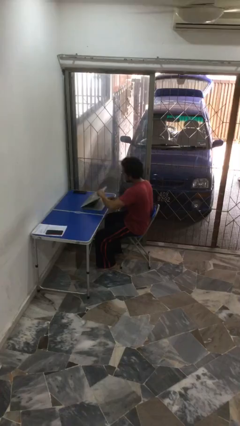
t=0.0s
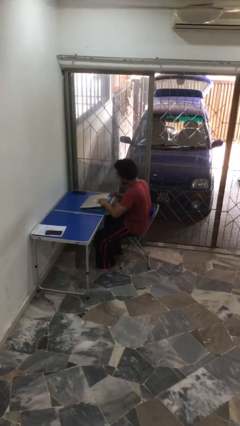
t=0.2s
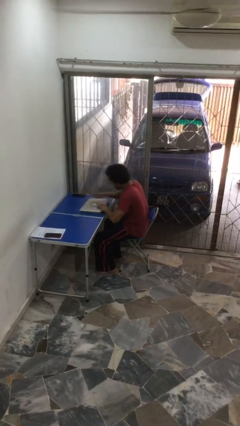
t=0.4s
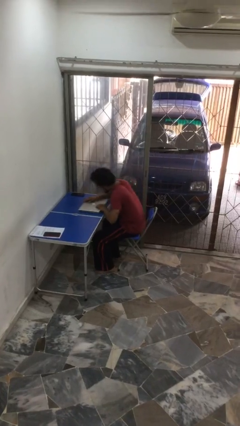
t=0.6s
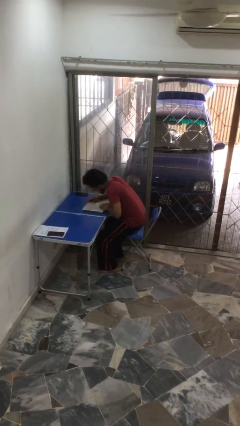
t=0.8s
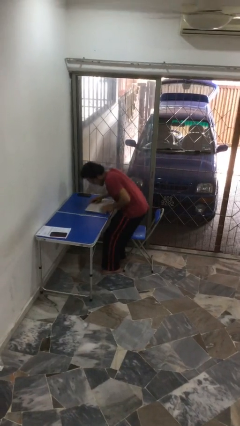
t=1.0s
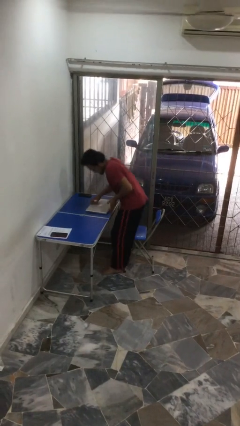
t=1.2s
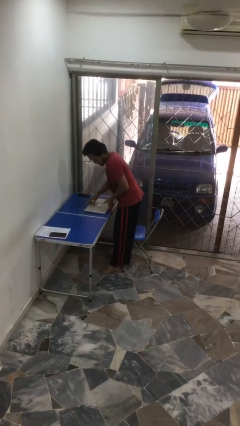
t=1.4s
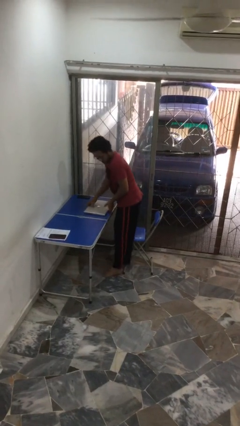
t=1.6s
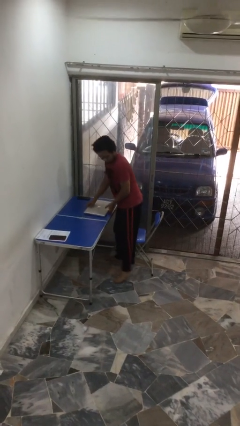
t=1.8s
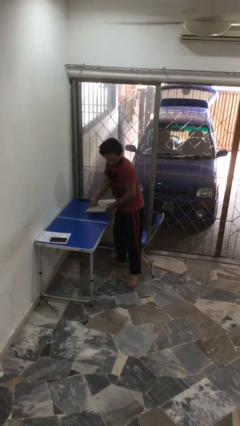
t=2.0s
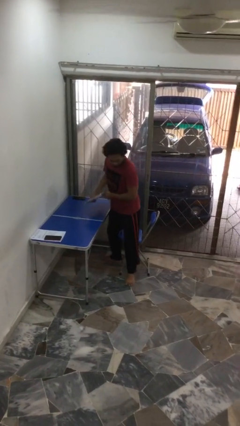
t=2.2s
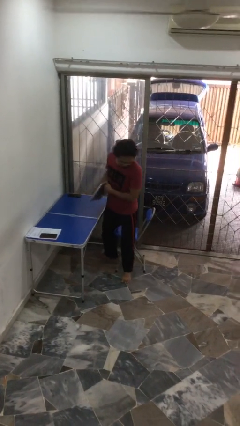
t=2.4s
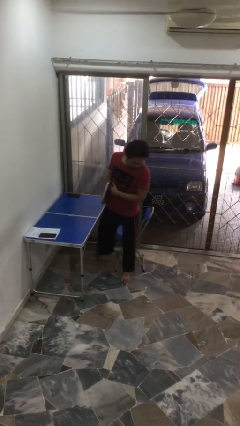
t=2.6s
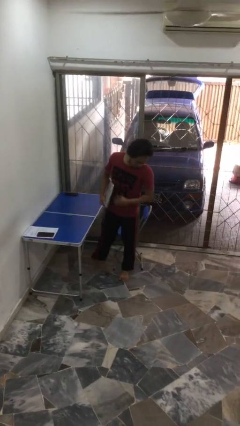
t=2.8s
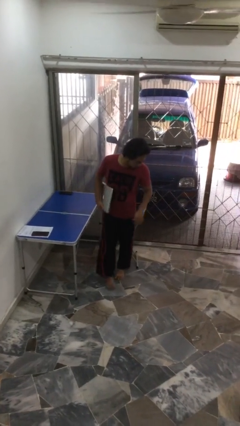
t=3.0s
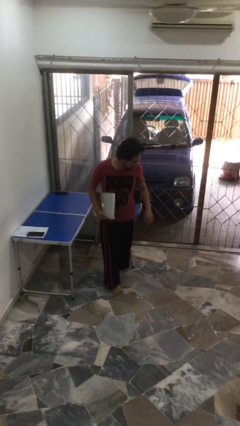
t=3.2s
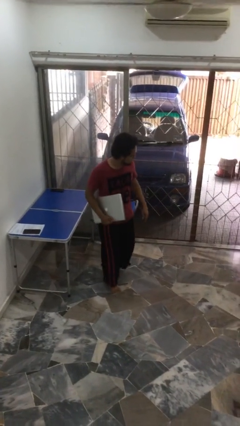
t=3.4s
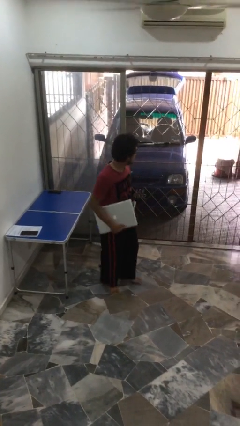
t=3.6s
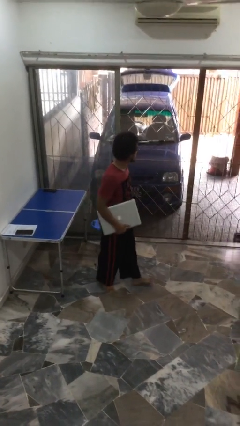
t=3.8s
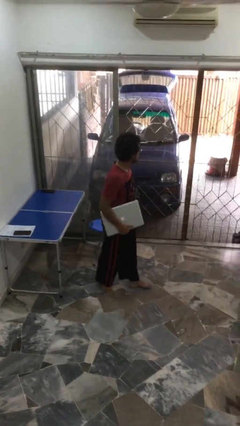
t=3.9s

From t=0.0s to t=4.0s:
person stands up

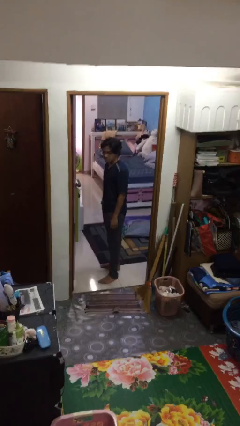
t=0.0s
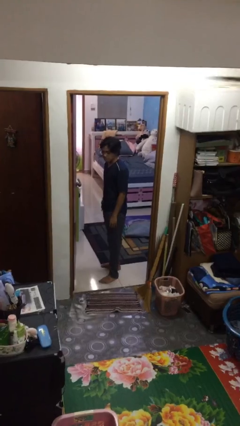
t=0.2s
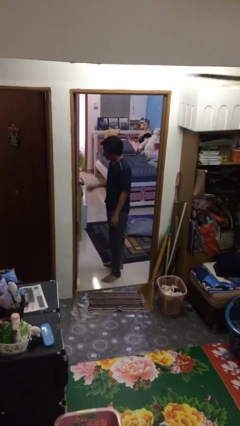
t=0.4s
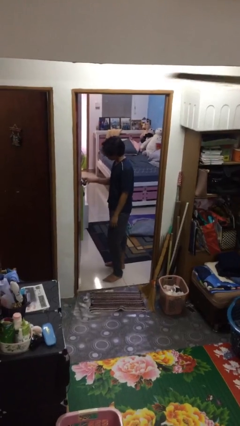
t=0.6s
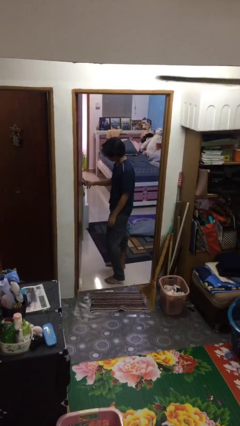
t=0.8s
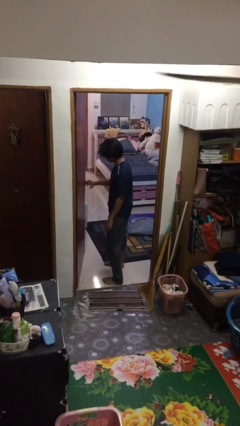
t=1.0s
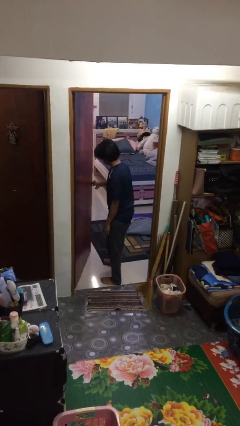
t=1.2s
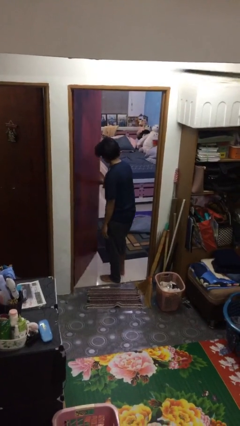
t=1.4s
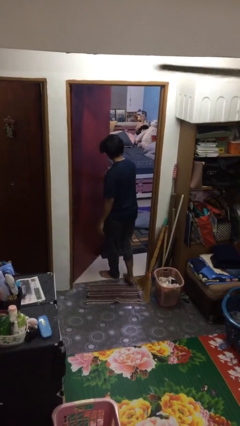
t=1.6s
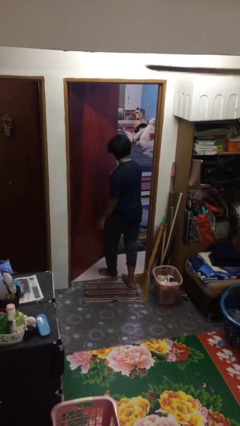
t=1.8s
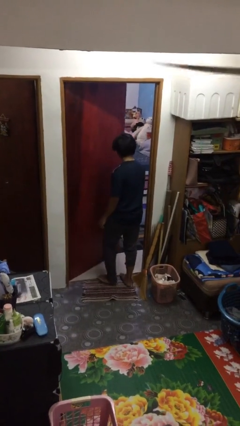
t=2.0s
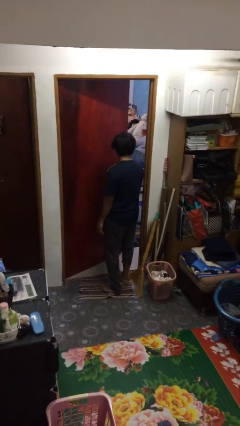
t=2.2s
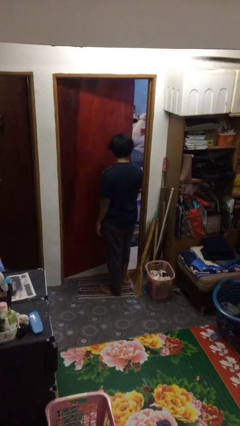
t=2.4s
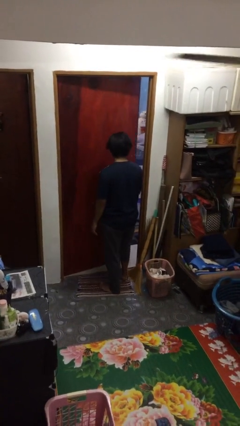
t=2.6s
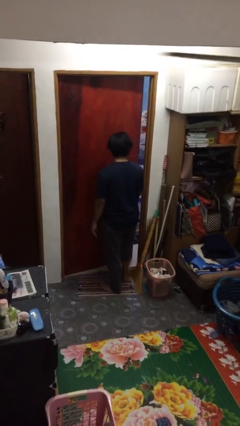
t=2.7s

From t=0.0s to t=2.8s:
person closes facility door

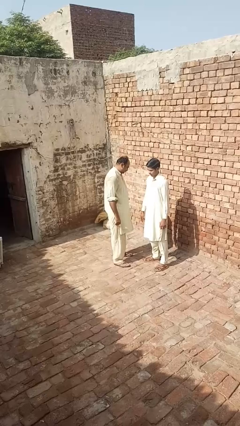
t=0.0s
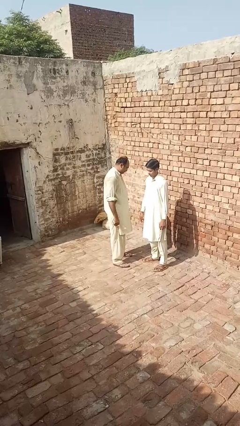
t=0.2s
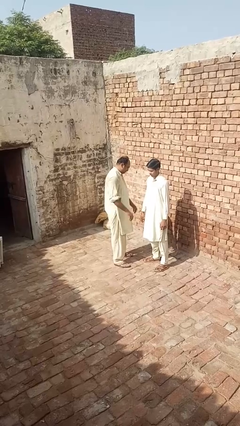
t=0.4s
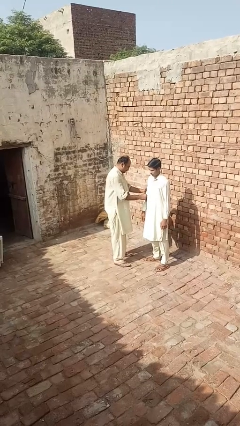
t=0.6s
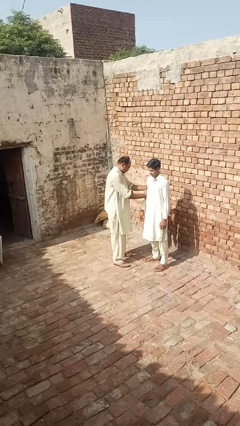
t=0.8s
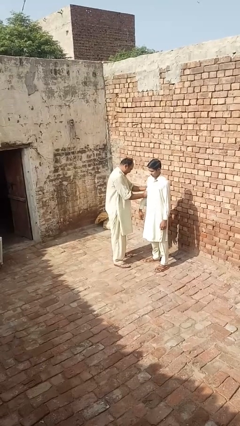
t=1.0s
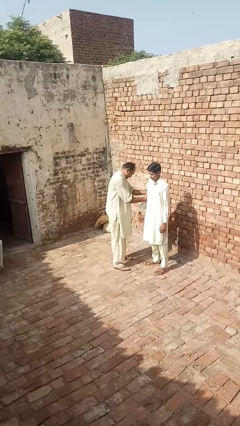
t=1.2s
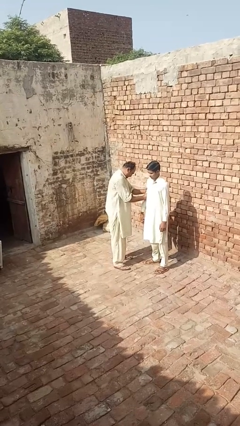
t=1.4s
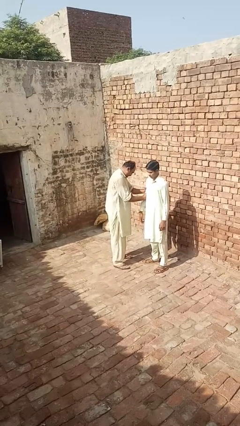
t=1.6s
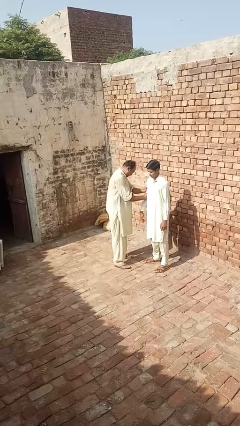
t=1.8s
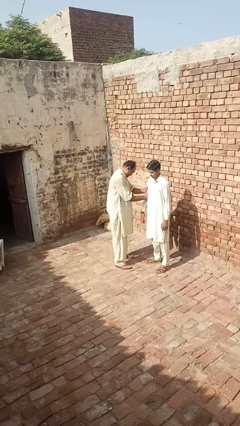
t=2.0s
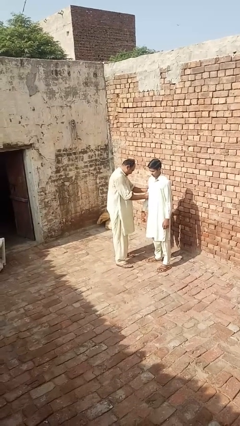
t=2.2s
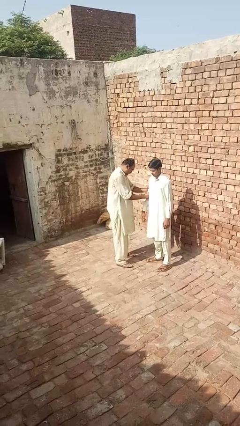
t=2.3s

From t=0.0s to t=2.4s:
person grabs person by bicep

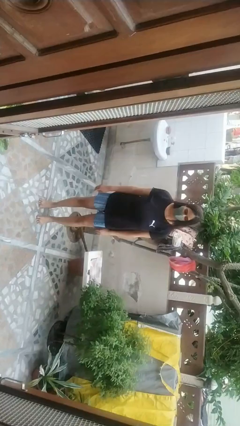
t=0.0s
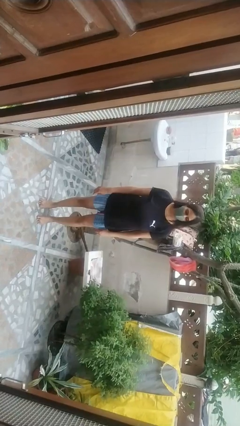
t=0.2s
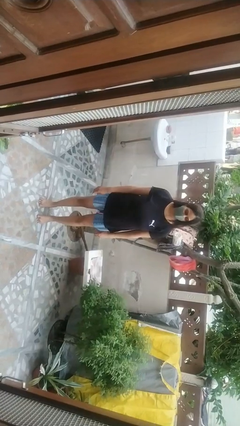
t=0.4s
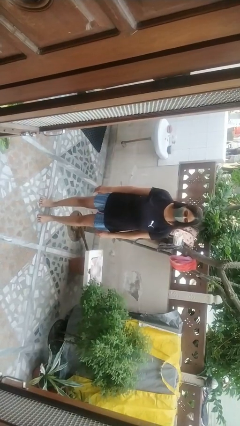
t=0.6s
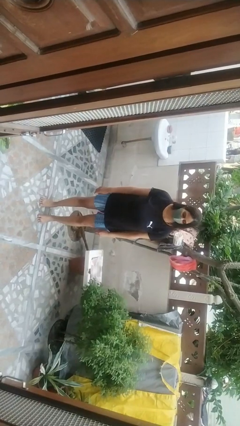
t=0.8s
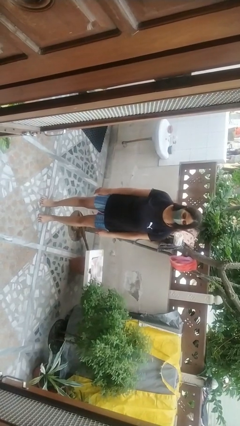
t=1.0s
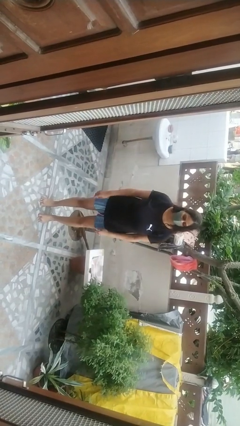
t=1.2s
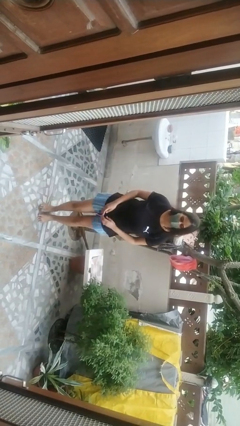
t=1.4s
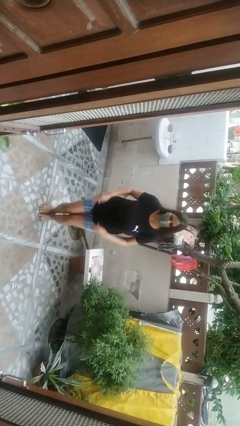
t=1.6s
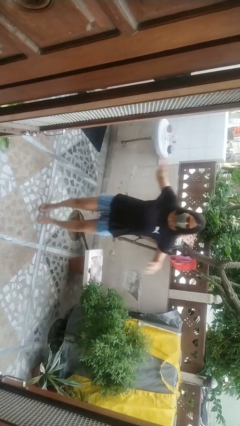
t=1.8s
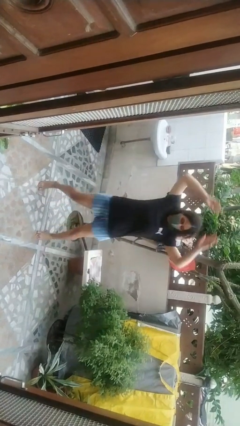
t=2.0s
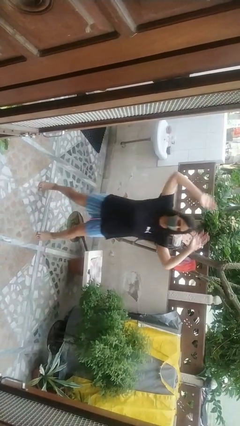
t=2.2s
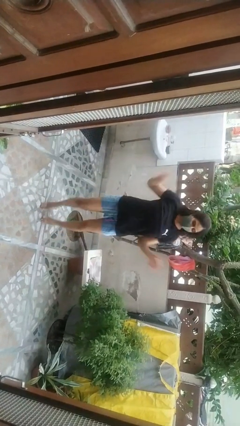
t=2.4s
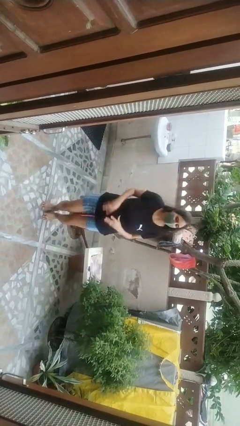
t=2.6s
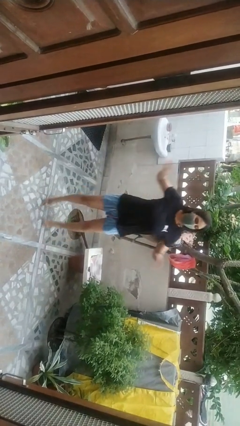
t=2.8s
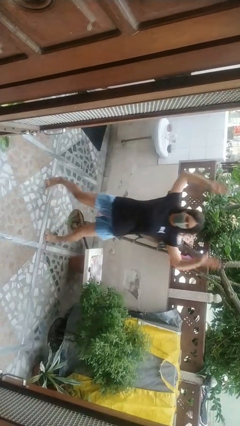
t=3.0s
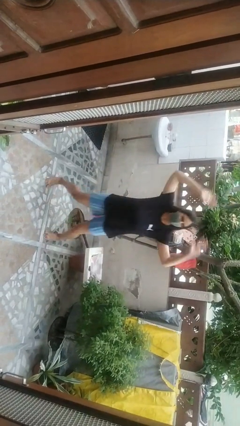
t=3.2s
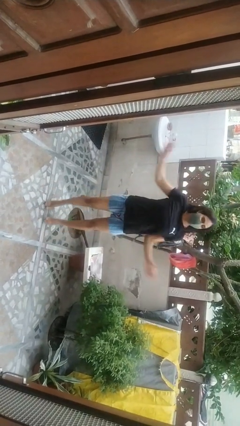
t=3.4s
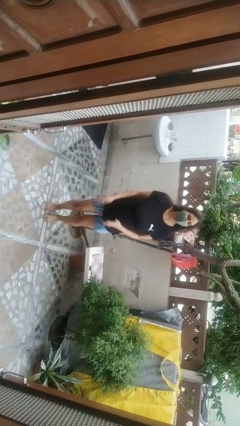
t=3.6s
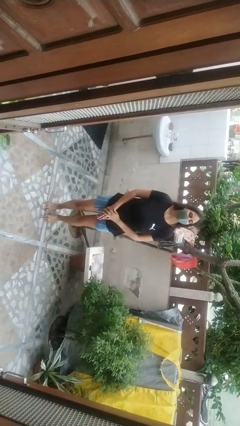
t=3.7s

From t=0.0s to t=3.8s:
person exercises with jumping jacks

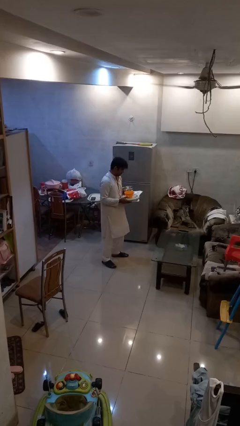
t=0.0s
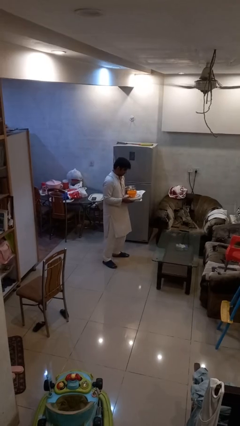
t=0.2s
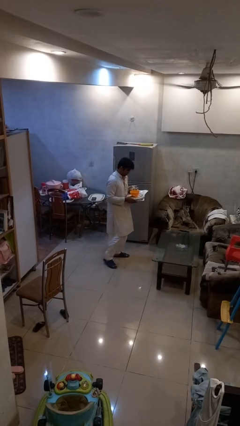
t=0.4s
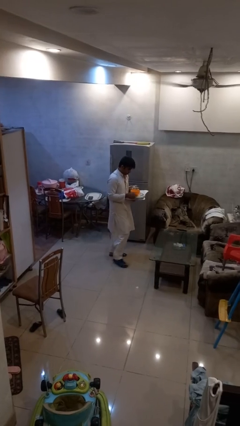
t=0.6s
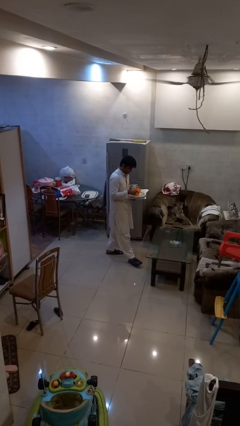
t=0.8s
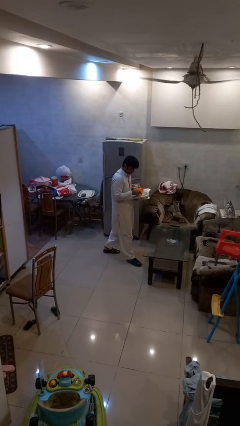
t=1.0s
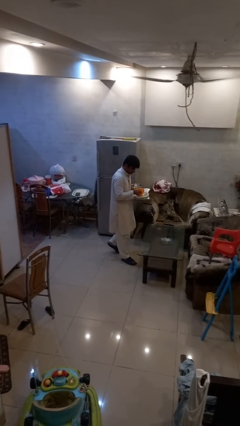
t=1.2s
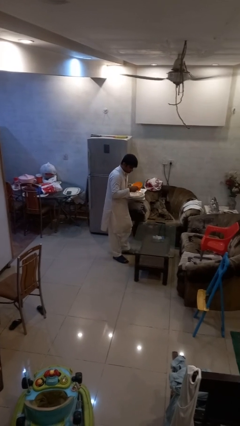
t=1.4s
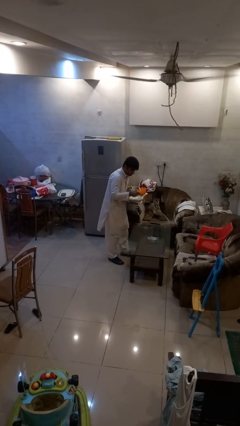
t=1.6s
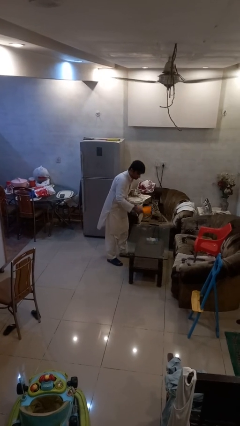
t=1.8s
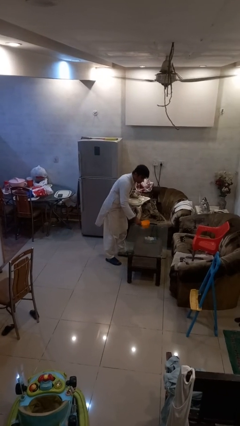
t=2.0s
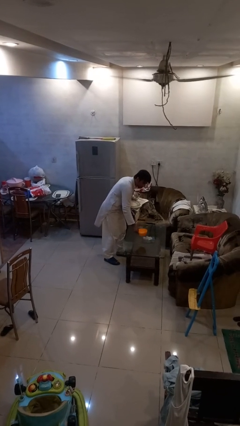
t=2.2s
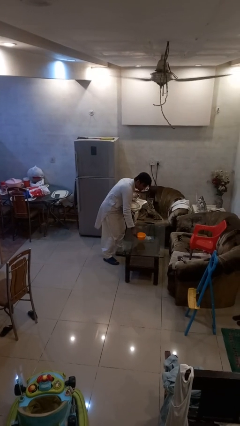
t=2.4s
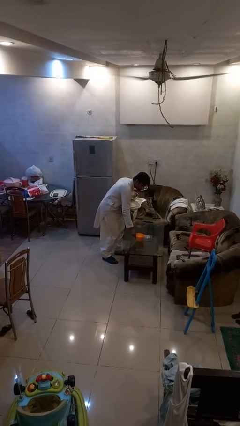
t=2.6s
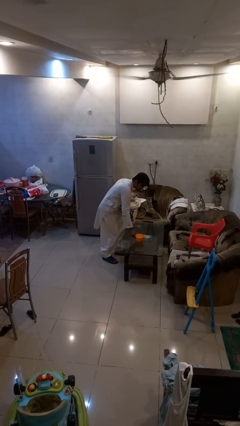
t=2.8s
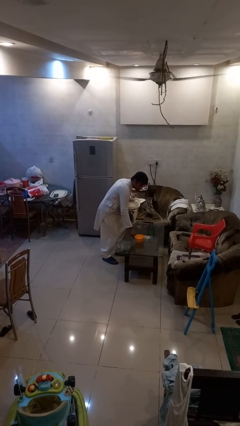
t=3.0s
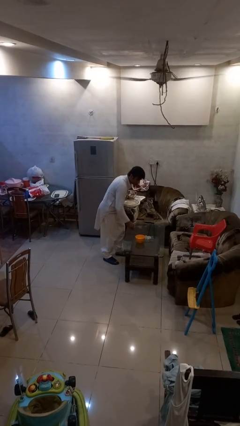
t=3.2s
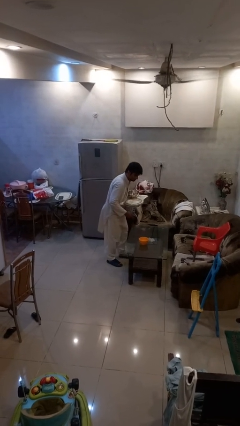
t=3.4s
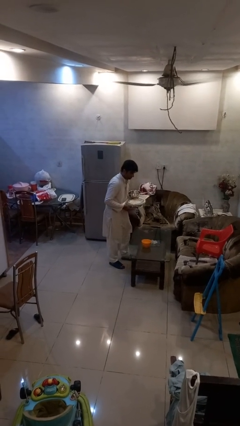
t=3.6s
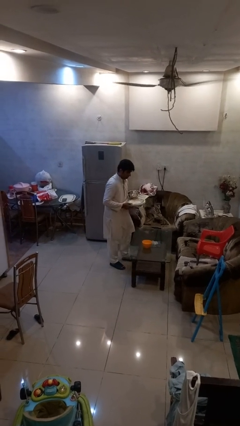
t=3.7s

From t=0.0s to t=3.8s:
person sets table

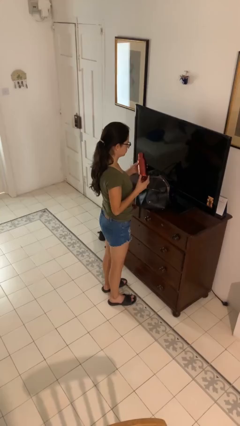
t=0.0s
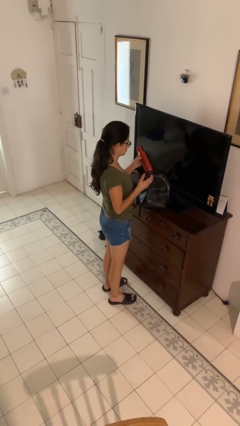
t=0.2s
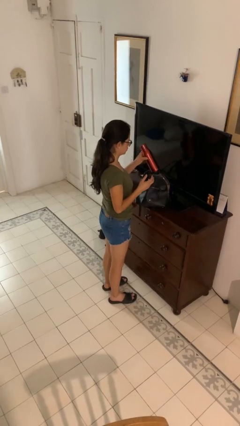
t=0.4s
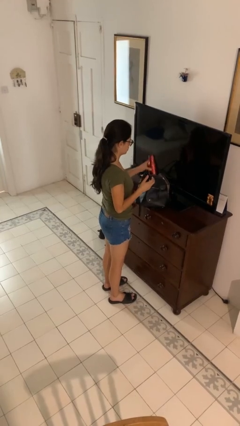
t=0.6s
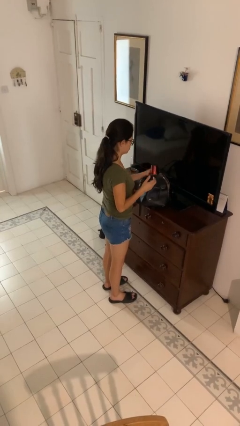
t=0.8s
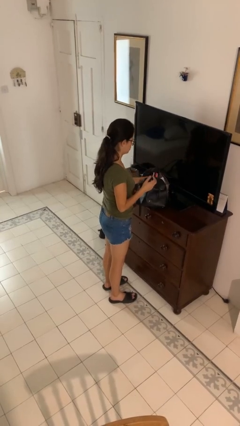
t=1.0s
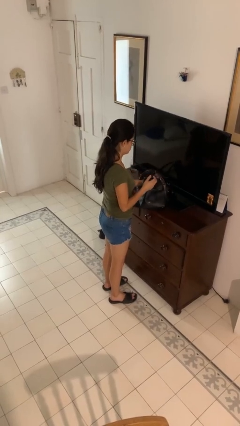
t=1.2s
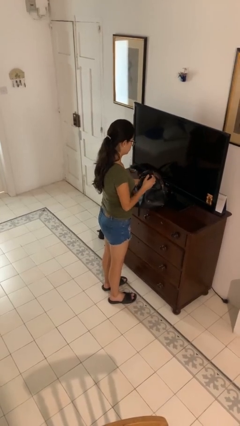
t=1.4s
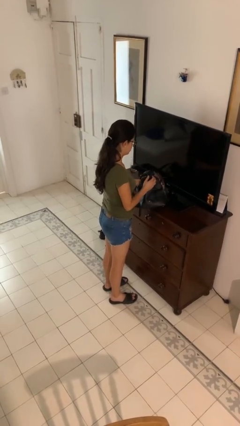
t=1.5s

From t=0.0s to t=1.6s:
person puts object into purse
